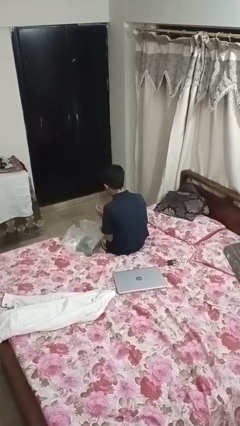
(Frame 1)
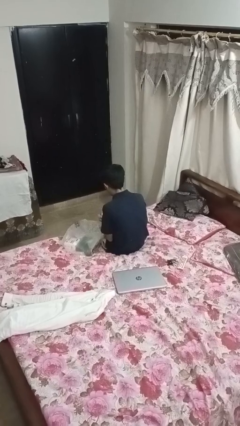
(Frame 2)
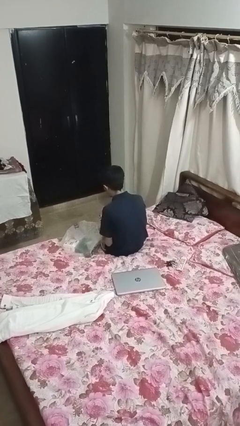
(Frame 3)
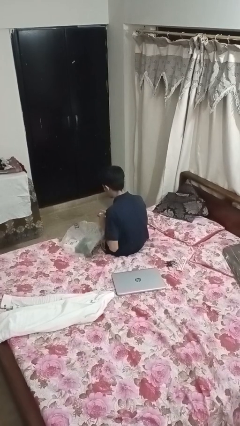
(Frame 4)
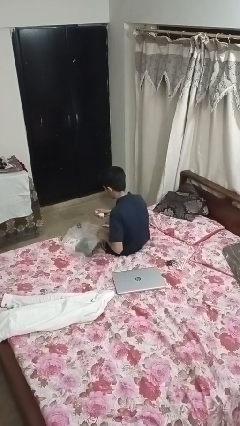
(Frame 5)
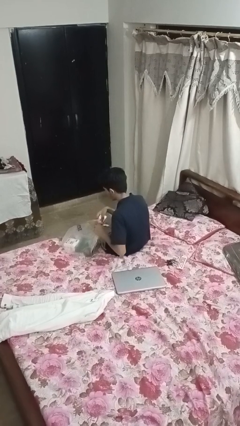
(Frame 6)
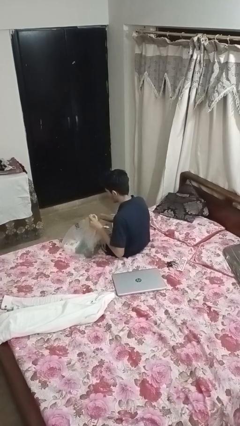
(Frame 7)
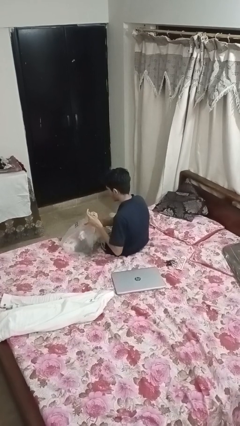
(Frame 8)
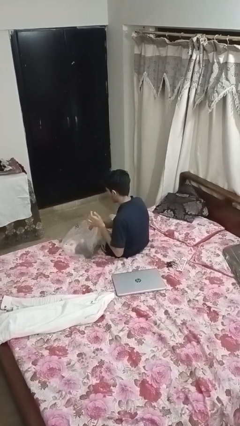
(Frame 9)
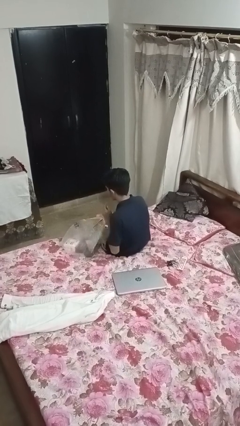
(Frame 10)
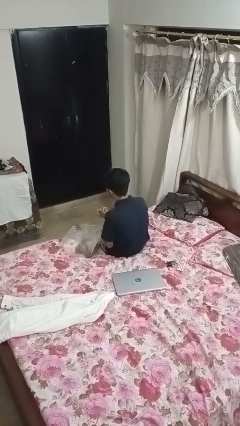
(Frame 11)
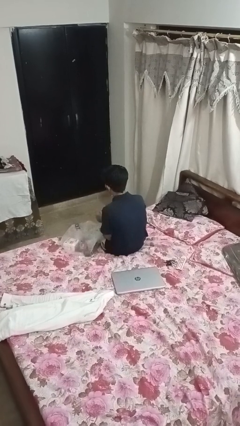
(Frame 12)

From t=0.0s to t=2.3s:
person puts object into bag

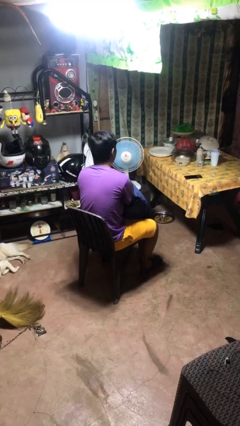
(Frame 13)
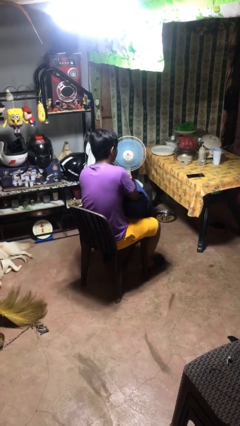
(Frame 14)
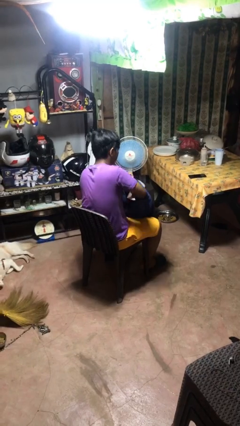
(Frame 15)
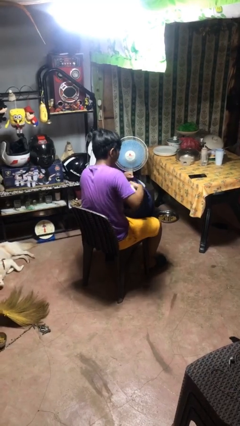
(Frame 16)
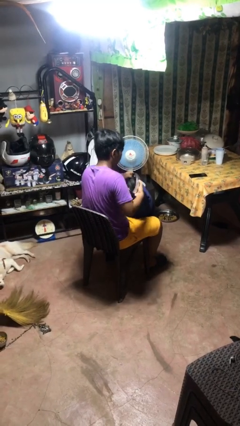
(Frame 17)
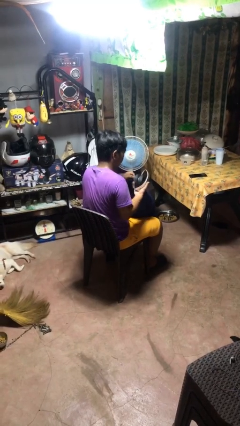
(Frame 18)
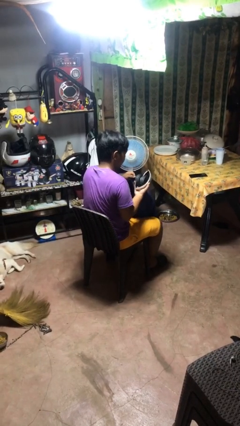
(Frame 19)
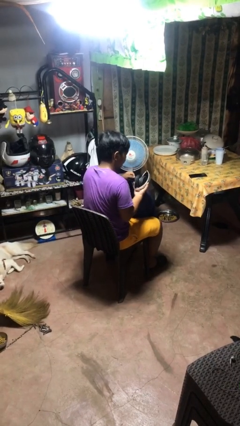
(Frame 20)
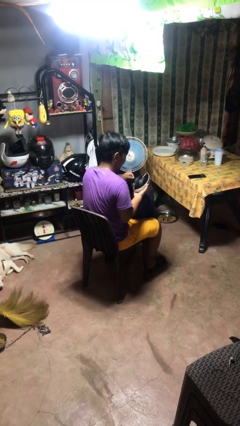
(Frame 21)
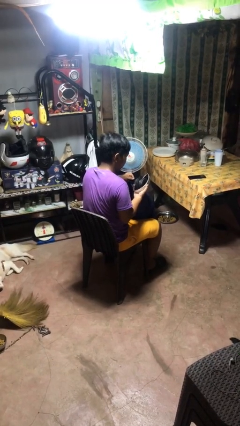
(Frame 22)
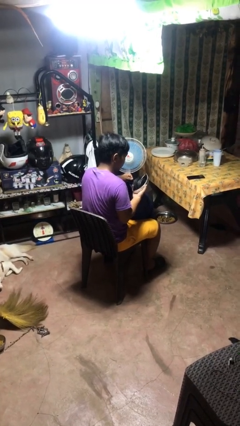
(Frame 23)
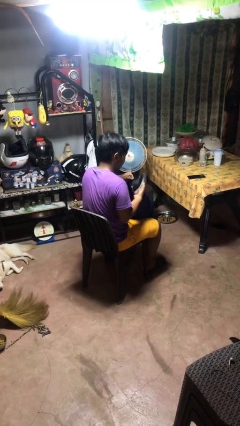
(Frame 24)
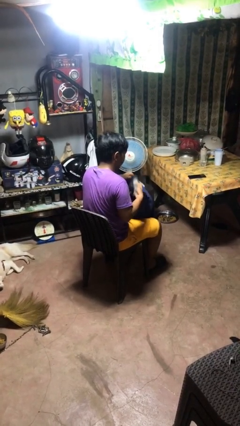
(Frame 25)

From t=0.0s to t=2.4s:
person takes object from backpack

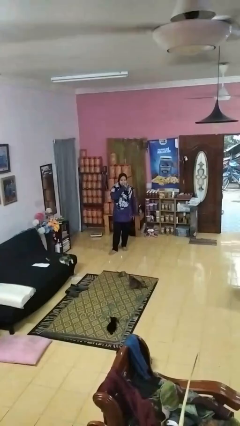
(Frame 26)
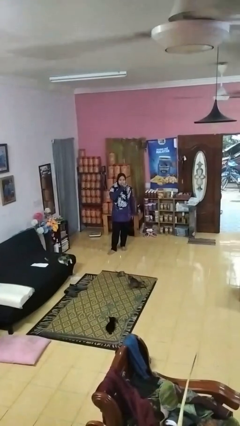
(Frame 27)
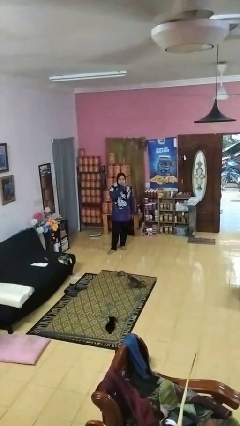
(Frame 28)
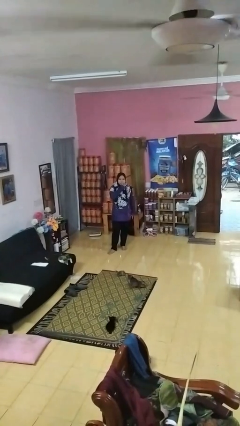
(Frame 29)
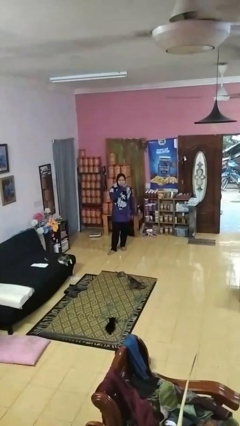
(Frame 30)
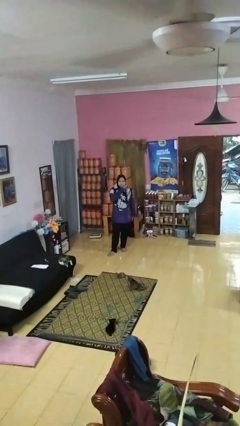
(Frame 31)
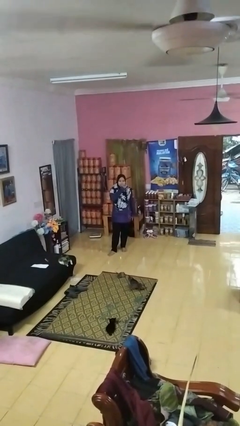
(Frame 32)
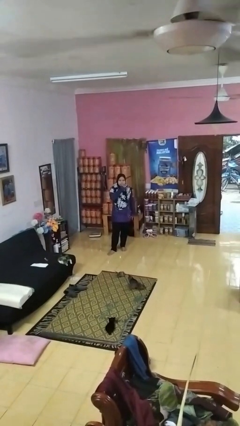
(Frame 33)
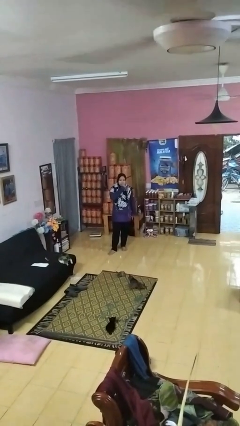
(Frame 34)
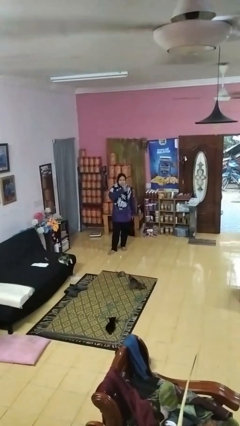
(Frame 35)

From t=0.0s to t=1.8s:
person gestures be quiet

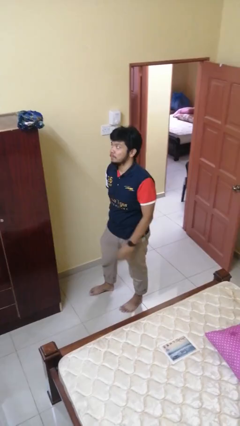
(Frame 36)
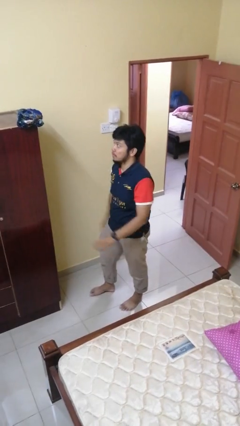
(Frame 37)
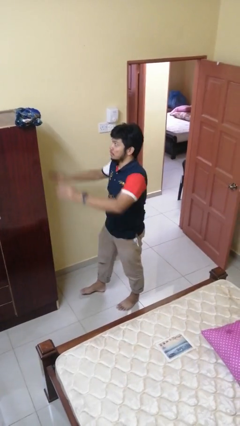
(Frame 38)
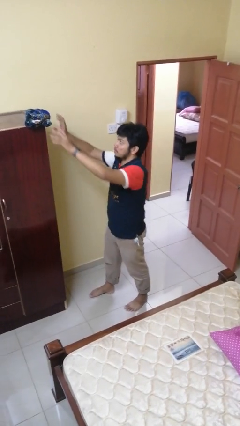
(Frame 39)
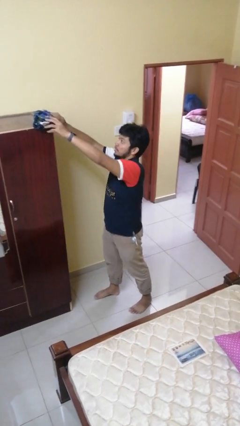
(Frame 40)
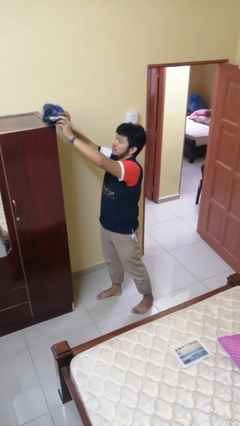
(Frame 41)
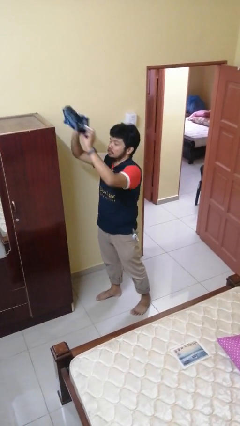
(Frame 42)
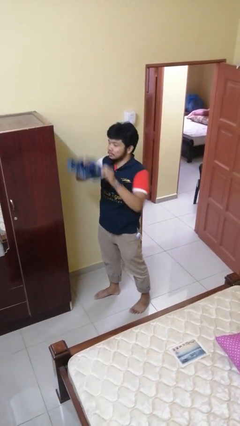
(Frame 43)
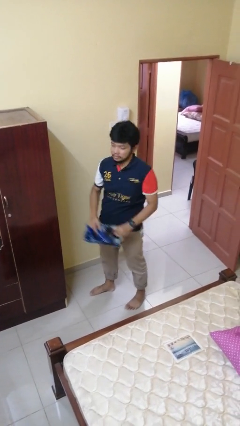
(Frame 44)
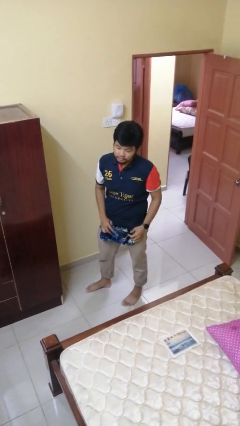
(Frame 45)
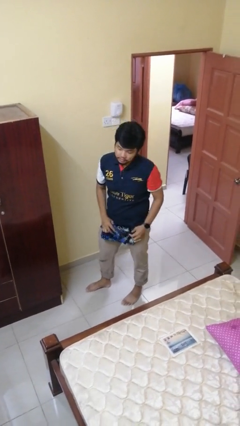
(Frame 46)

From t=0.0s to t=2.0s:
person picks up object from countertop

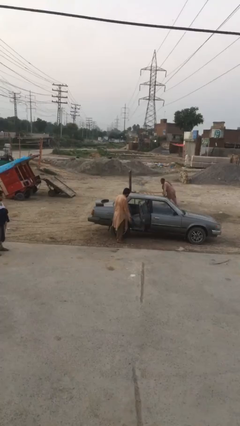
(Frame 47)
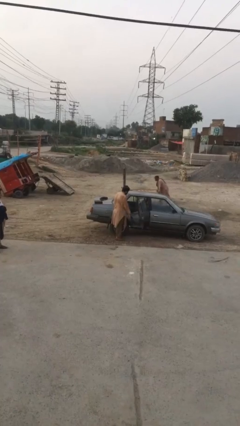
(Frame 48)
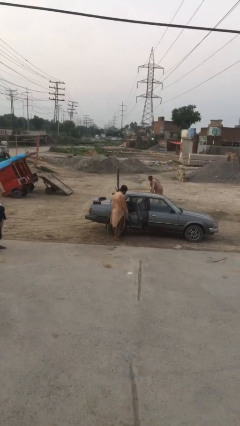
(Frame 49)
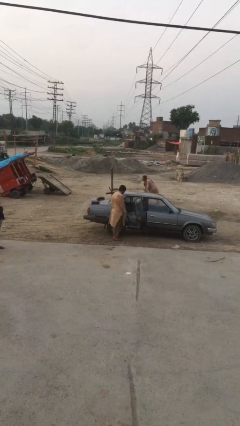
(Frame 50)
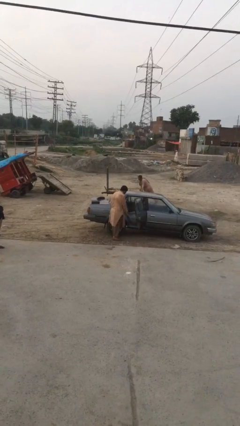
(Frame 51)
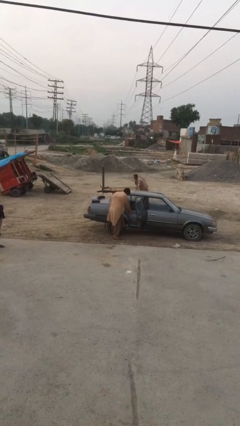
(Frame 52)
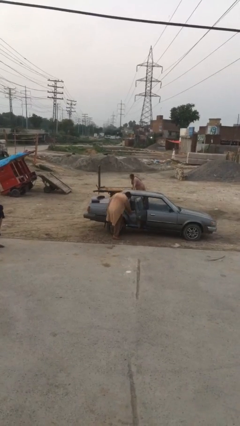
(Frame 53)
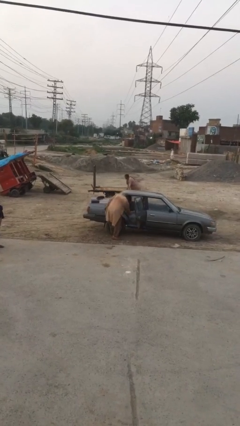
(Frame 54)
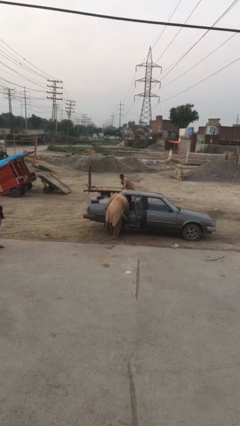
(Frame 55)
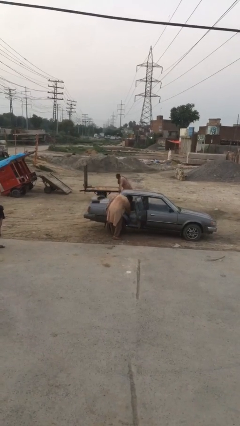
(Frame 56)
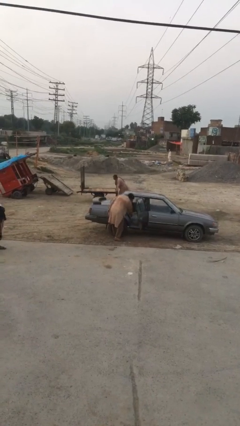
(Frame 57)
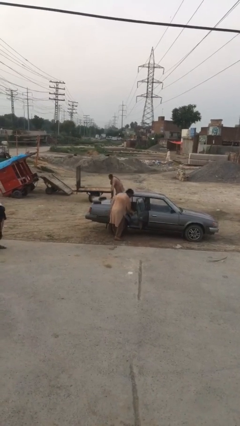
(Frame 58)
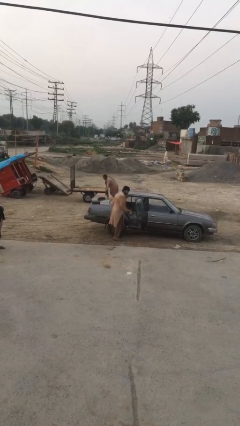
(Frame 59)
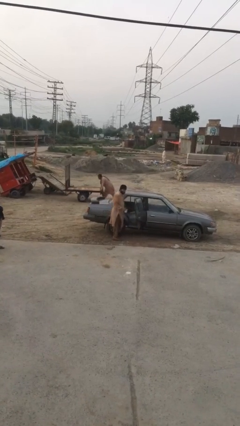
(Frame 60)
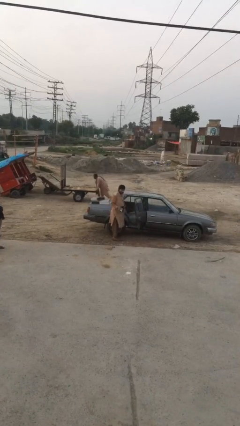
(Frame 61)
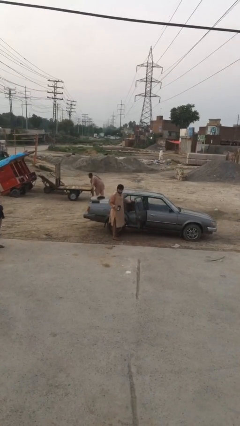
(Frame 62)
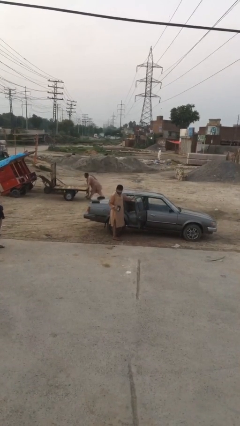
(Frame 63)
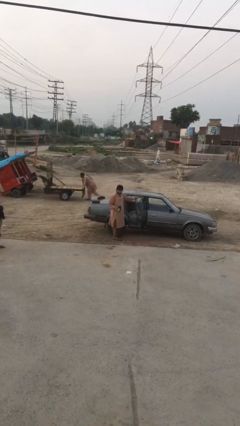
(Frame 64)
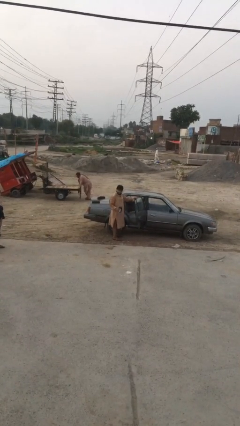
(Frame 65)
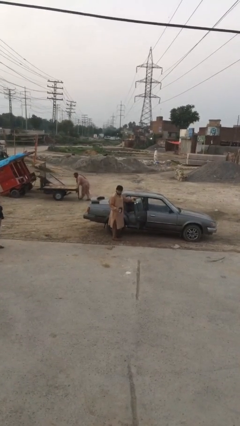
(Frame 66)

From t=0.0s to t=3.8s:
person unloads car

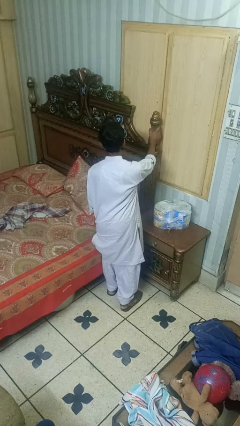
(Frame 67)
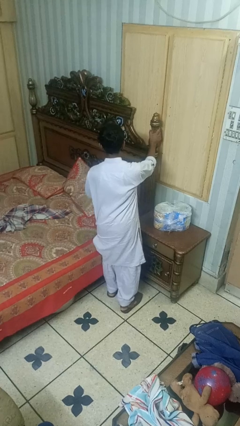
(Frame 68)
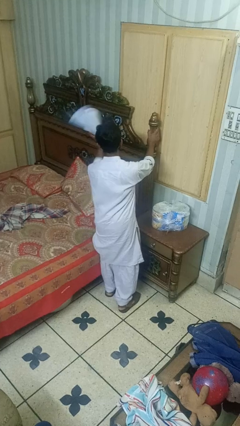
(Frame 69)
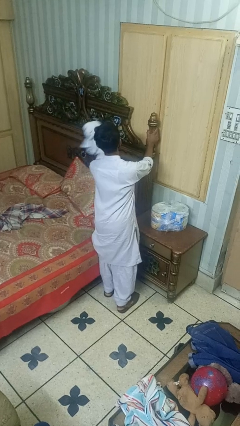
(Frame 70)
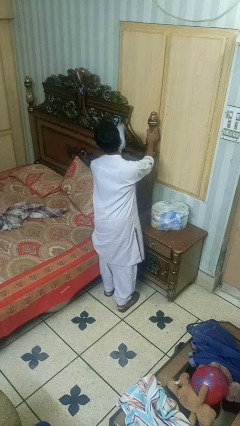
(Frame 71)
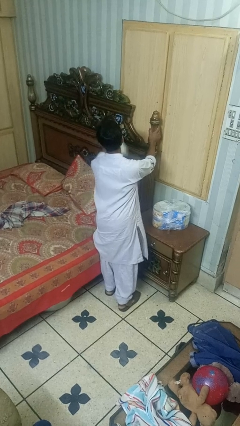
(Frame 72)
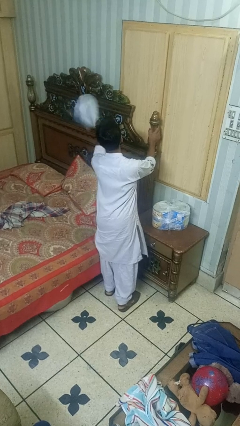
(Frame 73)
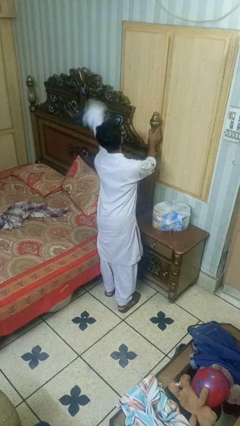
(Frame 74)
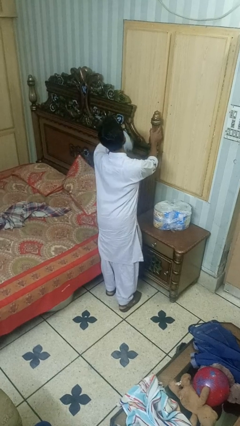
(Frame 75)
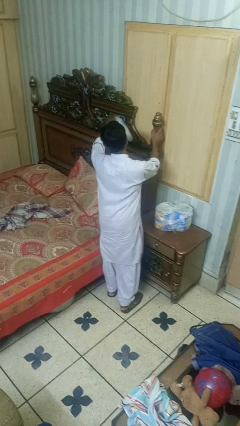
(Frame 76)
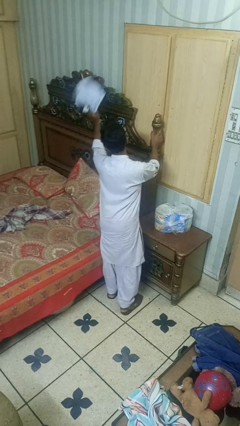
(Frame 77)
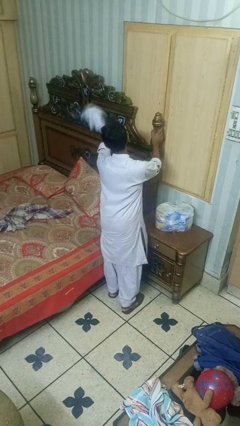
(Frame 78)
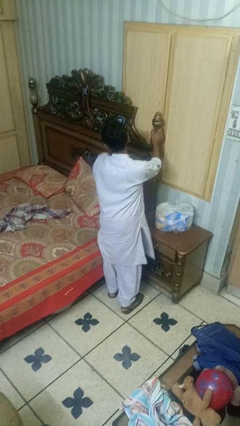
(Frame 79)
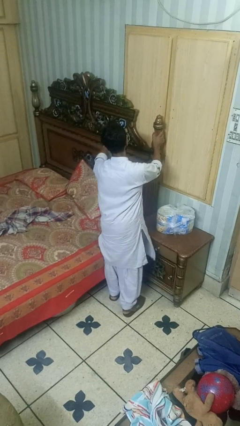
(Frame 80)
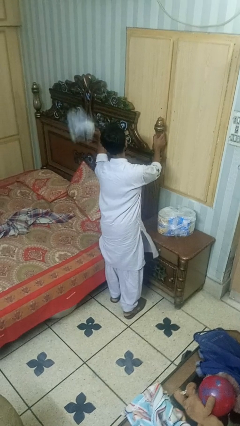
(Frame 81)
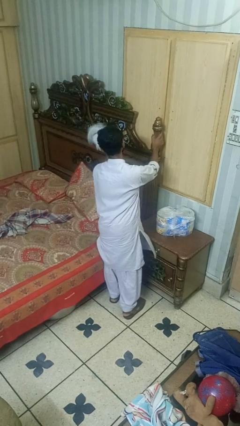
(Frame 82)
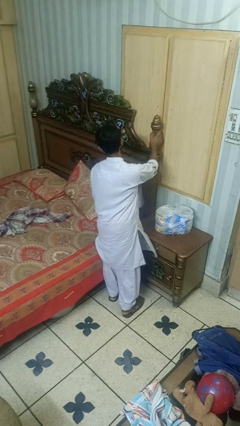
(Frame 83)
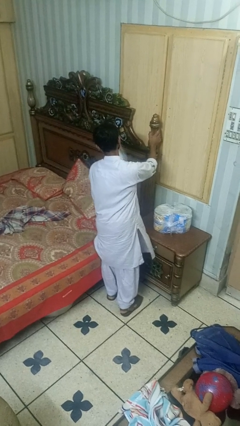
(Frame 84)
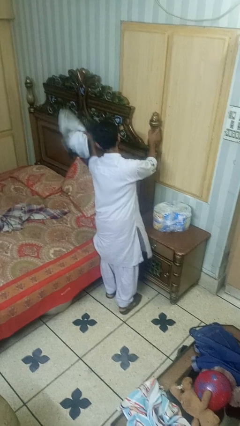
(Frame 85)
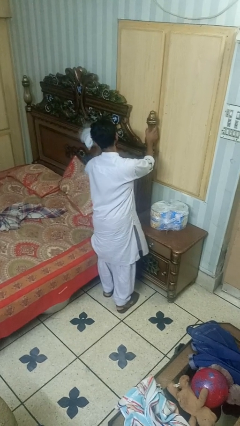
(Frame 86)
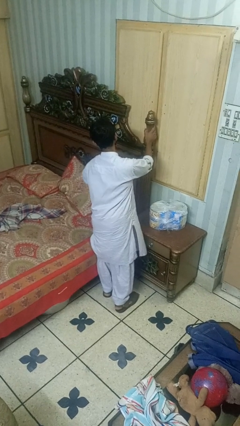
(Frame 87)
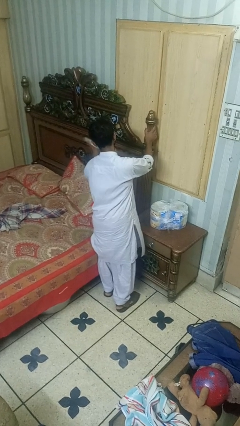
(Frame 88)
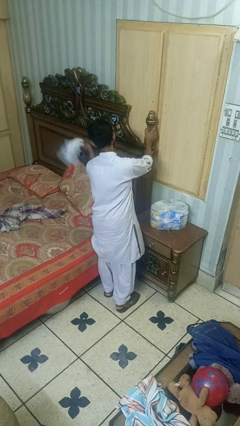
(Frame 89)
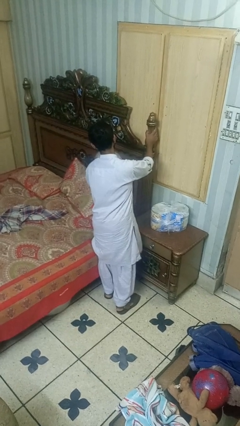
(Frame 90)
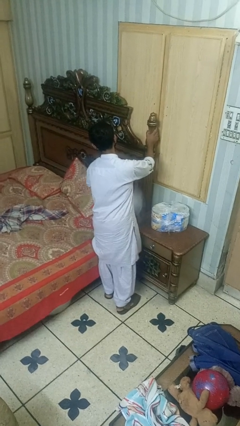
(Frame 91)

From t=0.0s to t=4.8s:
person dusts furniture

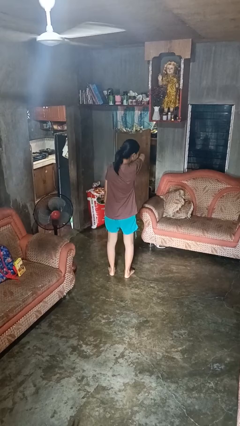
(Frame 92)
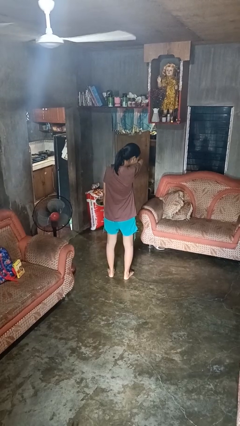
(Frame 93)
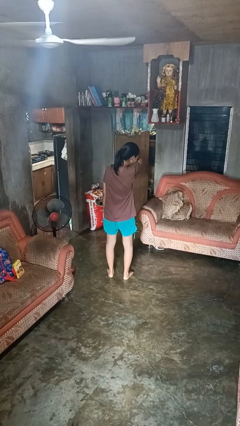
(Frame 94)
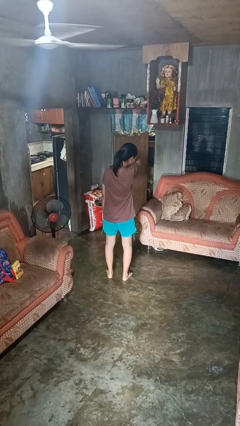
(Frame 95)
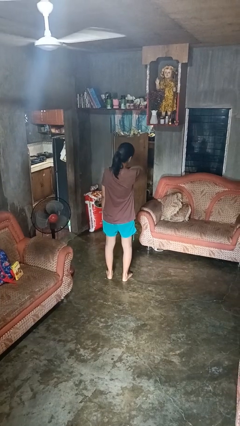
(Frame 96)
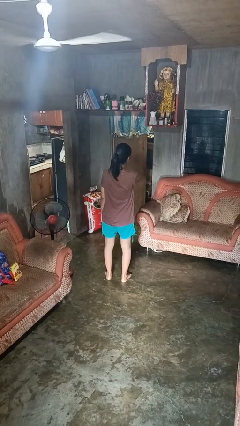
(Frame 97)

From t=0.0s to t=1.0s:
person sneezes into arm
